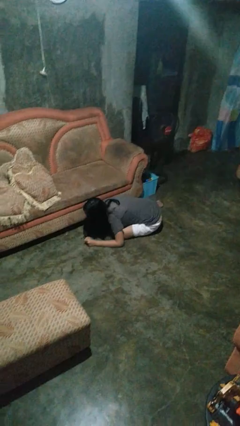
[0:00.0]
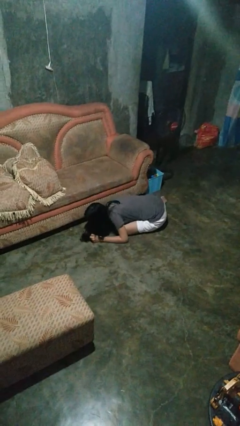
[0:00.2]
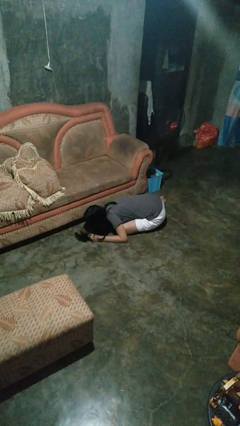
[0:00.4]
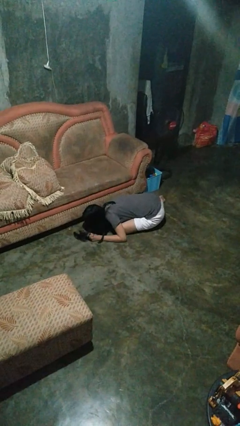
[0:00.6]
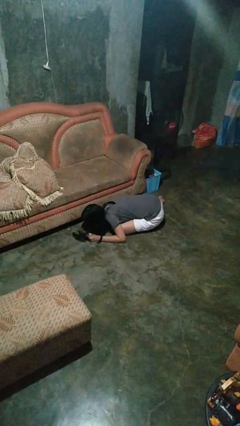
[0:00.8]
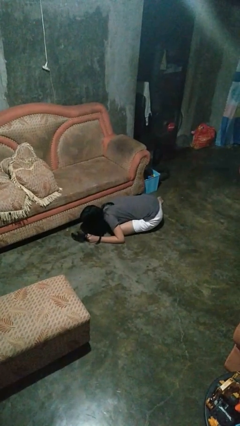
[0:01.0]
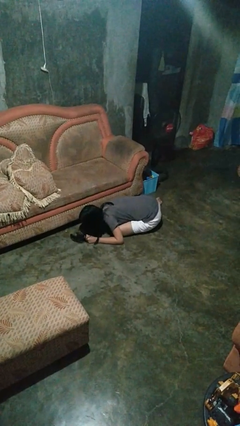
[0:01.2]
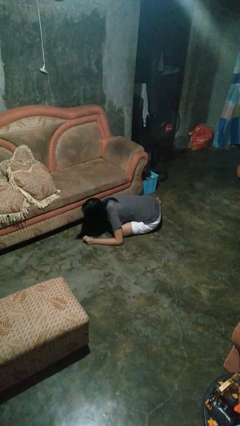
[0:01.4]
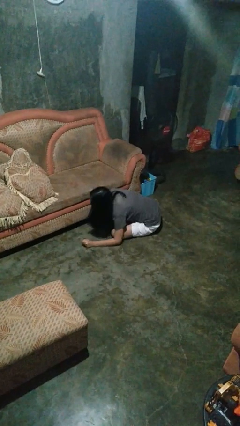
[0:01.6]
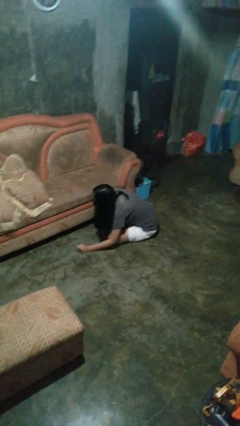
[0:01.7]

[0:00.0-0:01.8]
person searches under couch

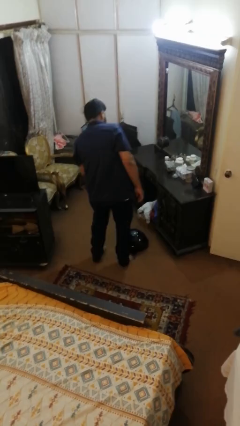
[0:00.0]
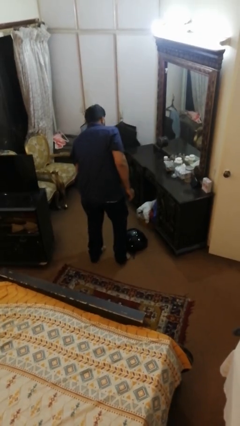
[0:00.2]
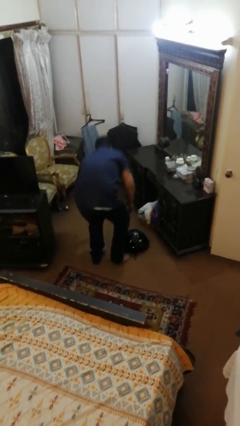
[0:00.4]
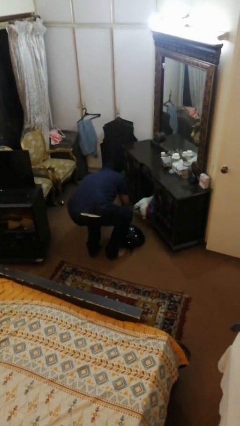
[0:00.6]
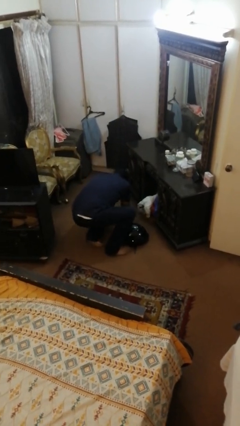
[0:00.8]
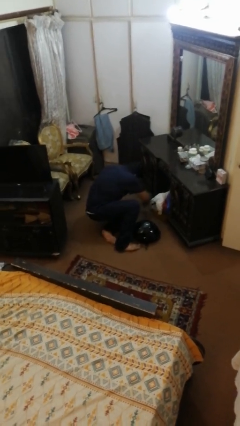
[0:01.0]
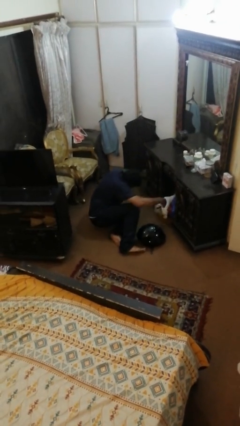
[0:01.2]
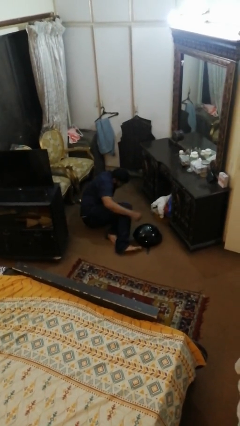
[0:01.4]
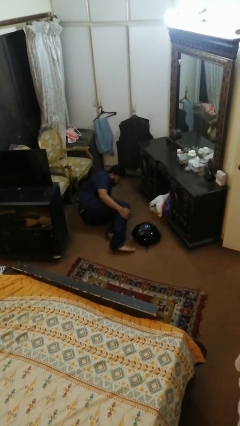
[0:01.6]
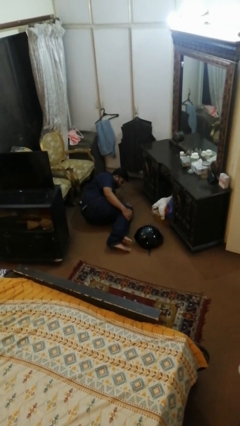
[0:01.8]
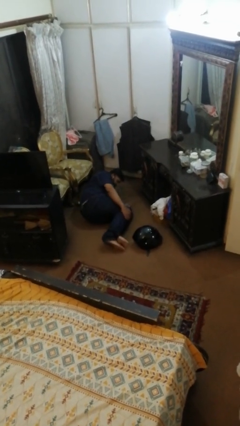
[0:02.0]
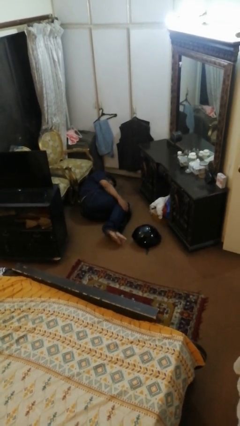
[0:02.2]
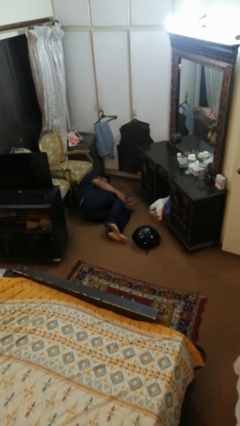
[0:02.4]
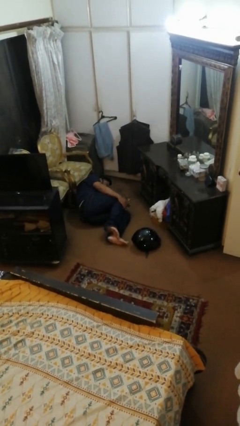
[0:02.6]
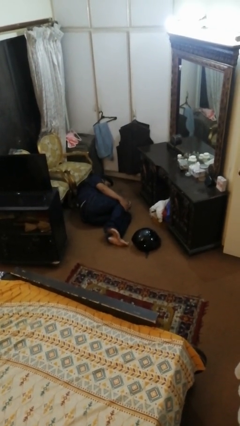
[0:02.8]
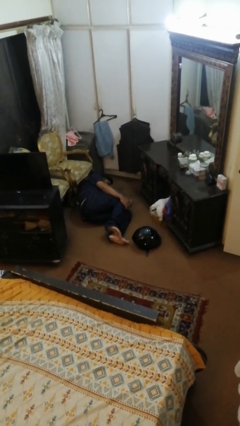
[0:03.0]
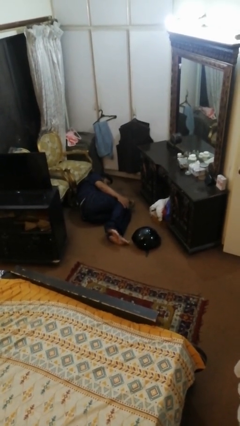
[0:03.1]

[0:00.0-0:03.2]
person lies down on floor

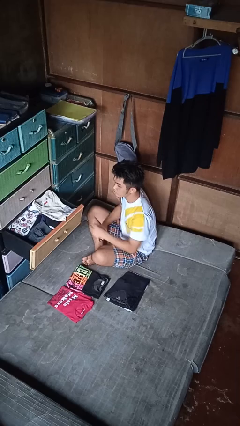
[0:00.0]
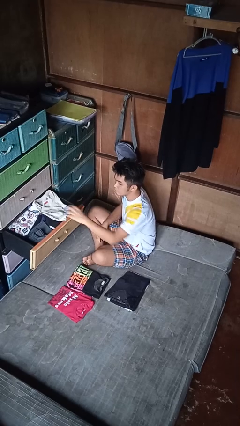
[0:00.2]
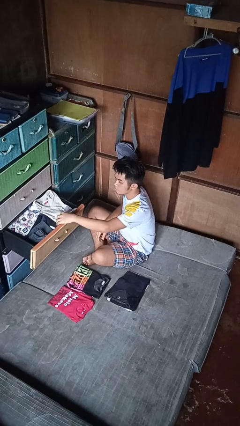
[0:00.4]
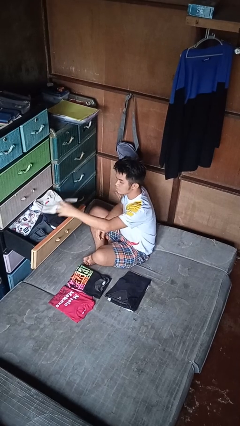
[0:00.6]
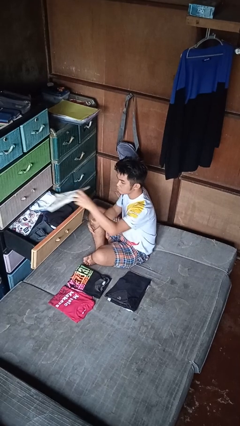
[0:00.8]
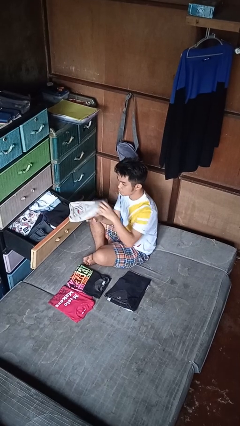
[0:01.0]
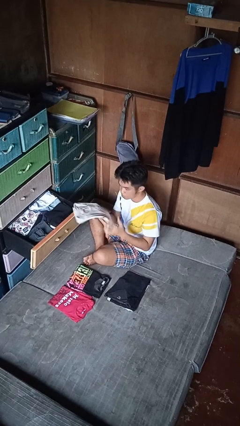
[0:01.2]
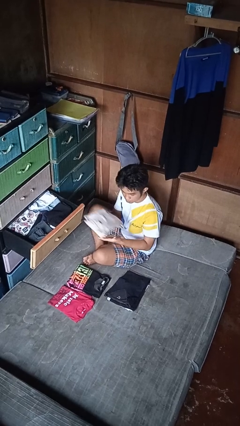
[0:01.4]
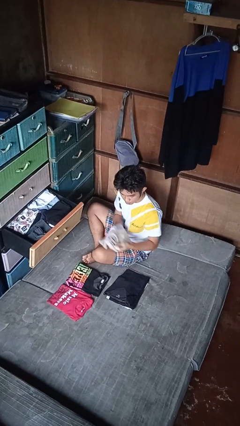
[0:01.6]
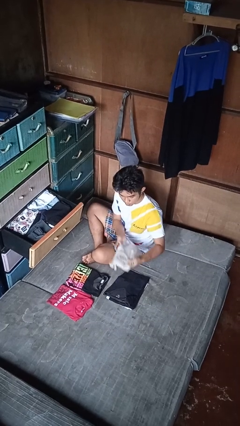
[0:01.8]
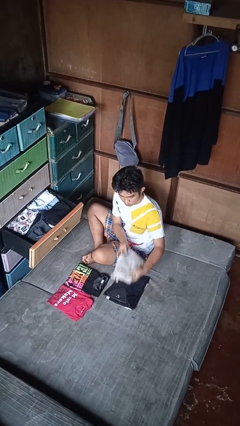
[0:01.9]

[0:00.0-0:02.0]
person takes clothes from dresser

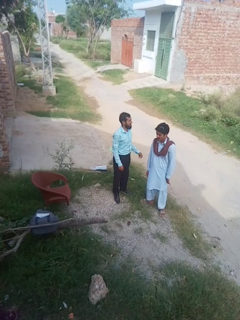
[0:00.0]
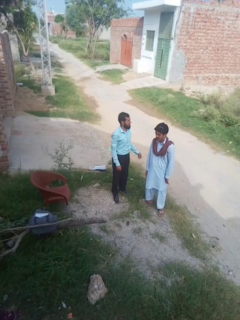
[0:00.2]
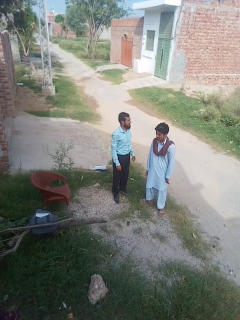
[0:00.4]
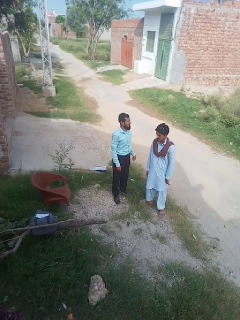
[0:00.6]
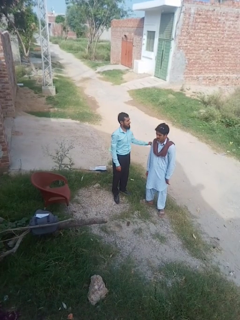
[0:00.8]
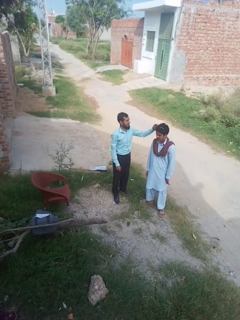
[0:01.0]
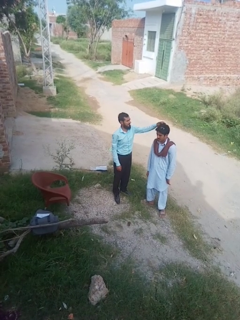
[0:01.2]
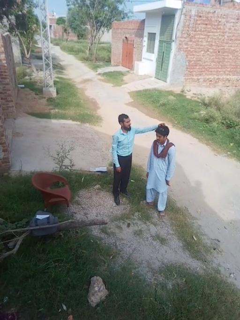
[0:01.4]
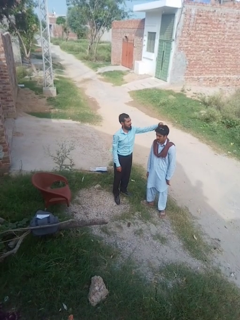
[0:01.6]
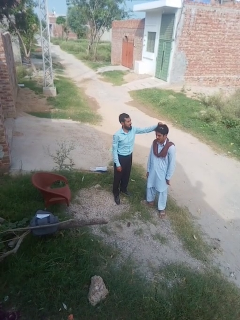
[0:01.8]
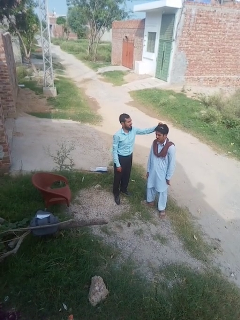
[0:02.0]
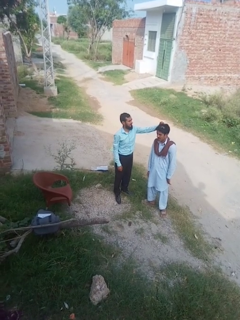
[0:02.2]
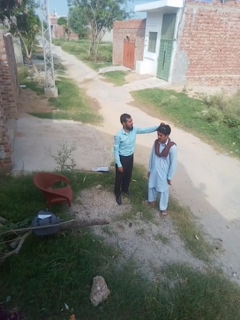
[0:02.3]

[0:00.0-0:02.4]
person grabs person by hair

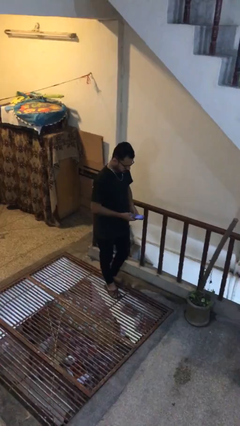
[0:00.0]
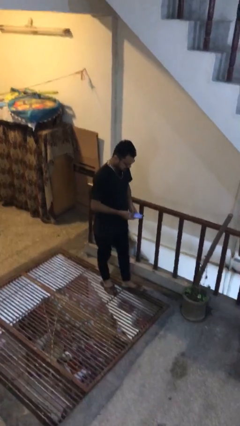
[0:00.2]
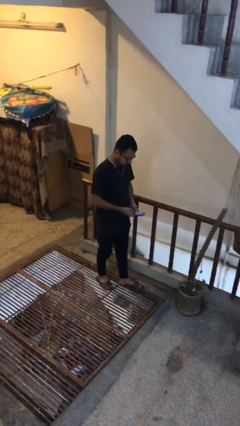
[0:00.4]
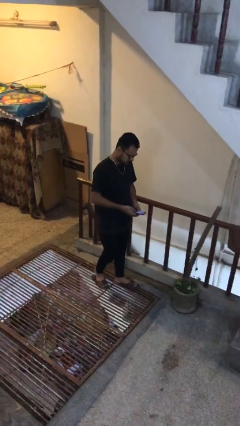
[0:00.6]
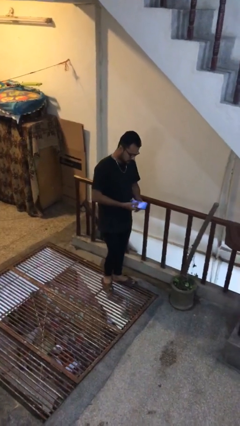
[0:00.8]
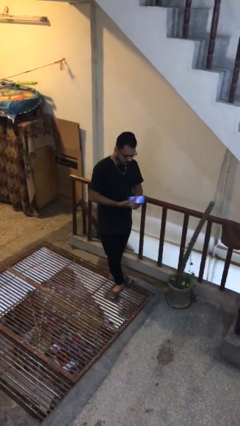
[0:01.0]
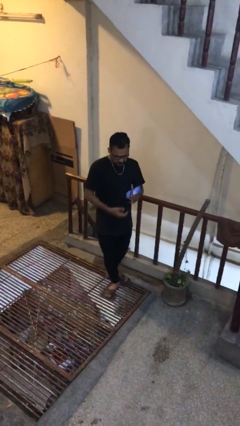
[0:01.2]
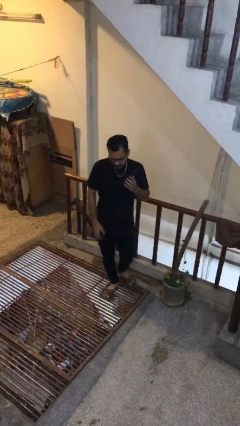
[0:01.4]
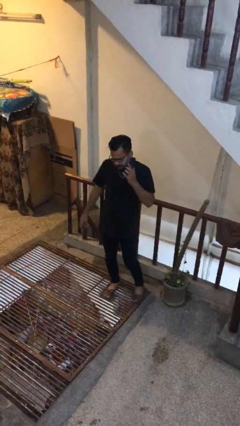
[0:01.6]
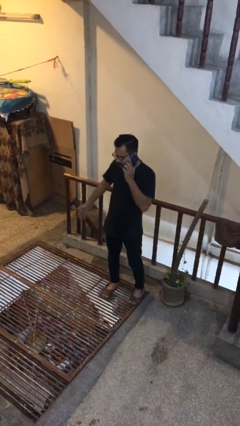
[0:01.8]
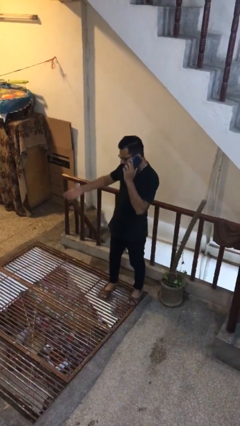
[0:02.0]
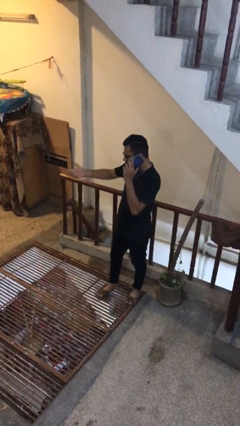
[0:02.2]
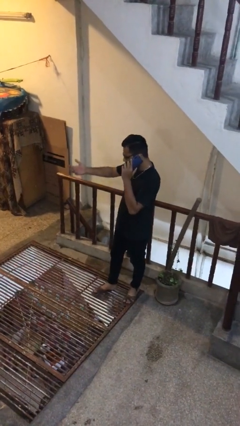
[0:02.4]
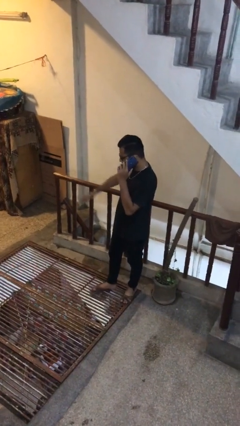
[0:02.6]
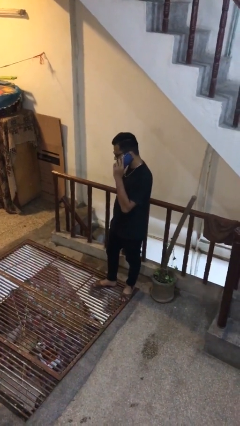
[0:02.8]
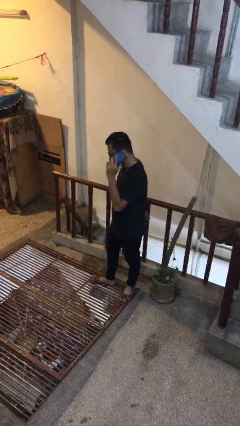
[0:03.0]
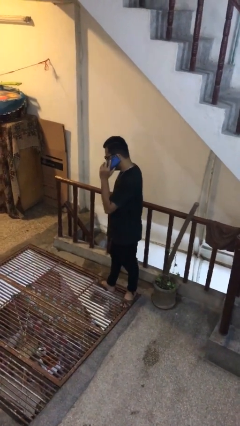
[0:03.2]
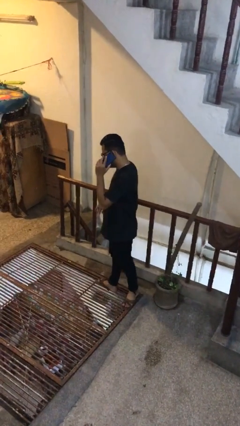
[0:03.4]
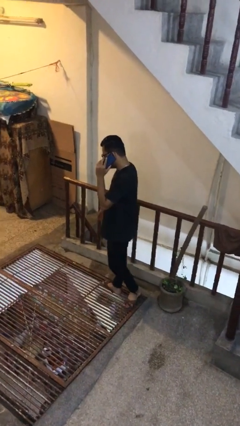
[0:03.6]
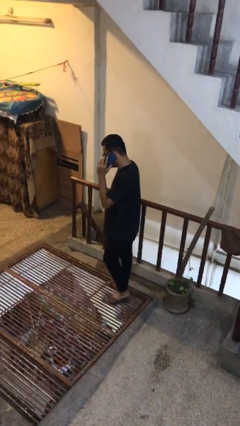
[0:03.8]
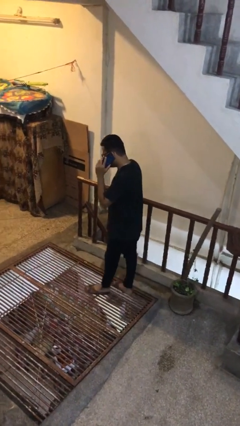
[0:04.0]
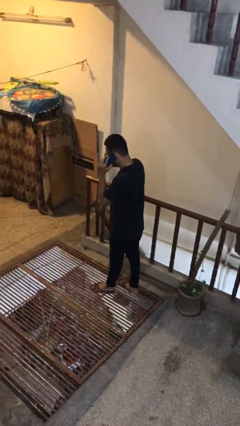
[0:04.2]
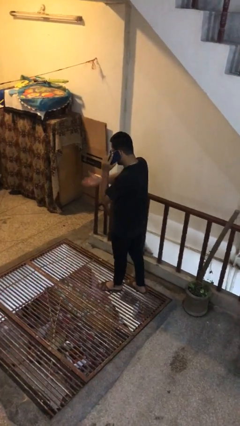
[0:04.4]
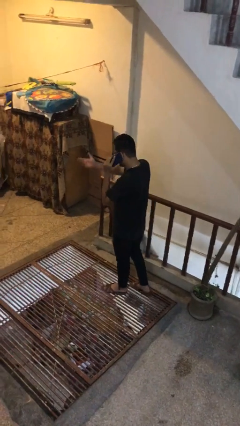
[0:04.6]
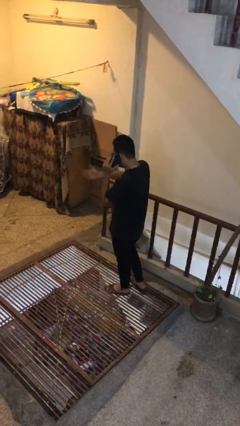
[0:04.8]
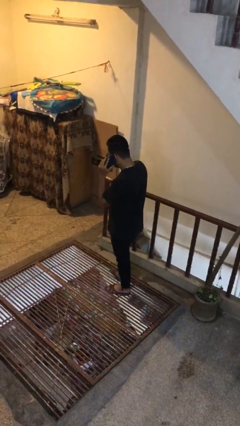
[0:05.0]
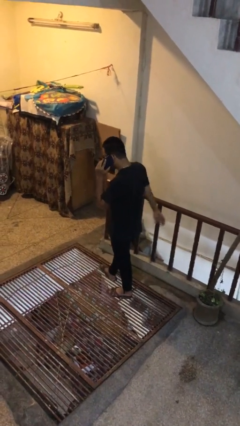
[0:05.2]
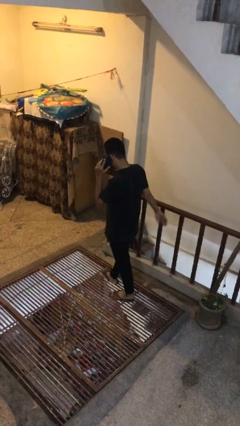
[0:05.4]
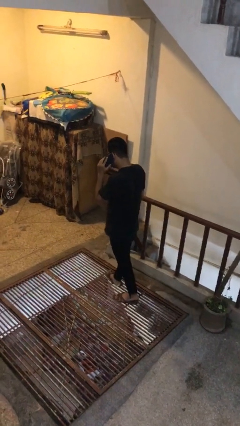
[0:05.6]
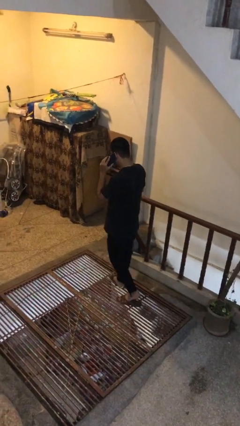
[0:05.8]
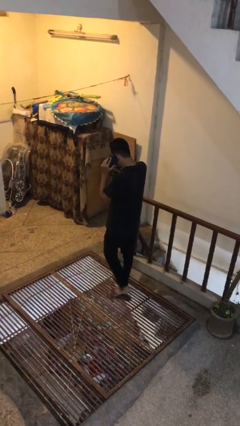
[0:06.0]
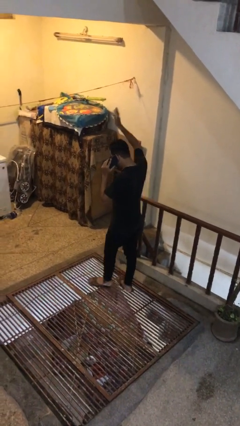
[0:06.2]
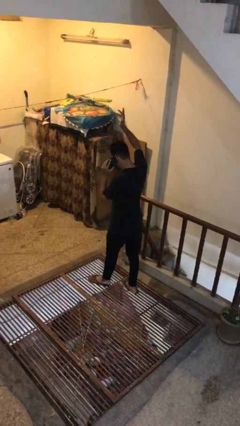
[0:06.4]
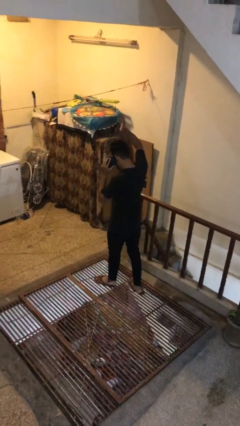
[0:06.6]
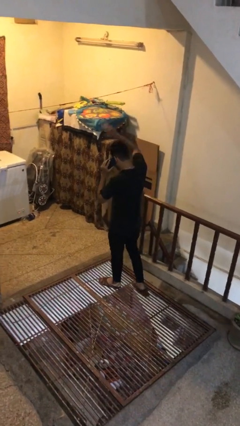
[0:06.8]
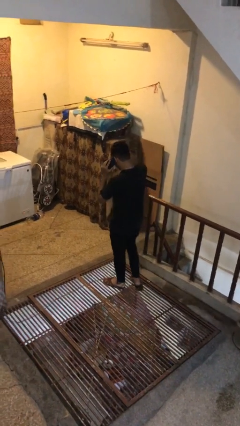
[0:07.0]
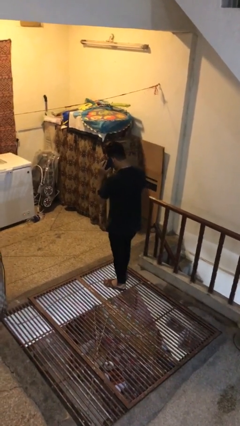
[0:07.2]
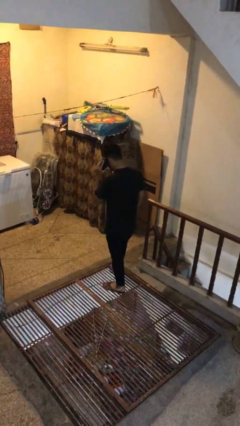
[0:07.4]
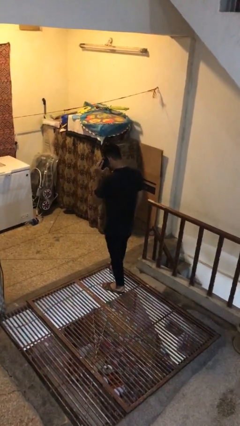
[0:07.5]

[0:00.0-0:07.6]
person talks on phone

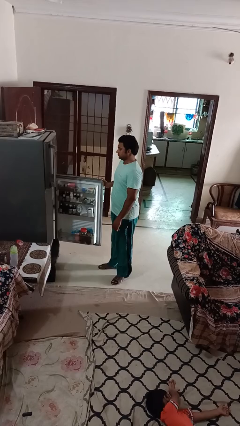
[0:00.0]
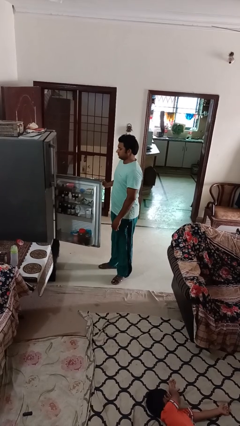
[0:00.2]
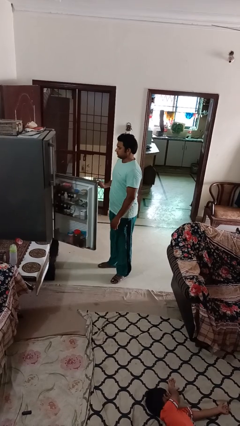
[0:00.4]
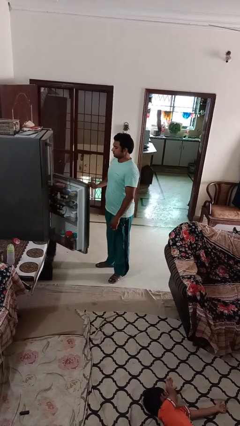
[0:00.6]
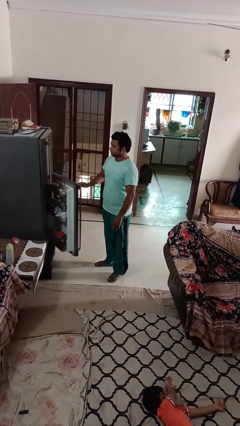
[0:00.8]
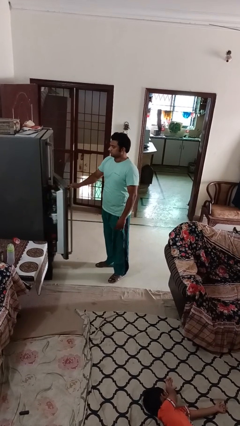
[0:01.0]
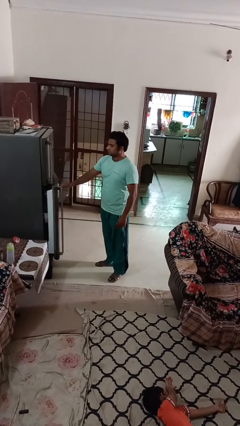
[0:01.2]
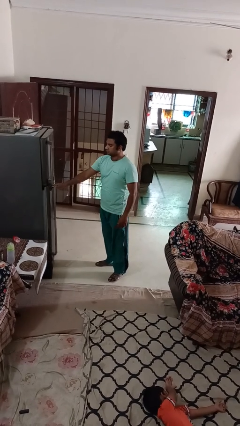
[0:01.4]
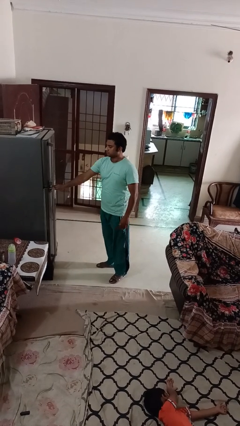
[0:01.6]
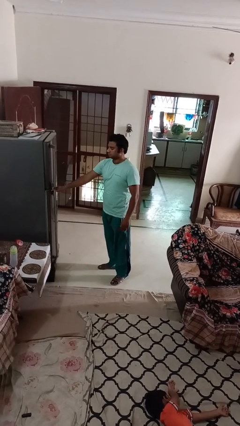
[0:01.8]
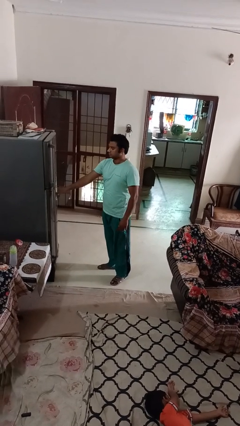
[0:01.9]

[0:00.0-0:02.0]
person closes refrigerator
